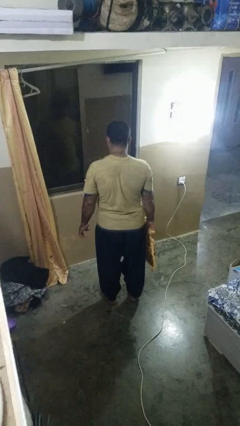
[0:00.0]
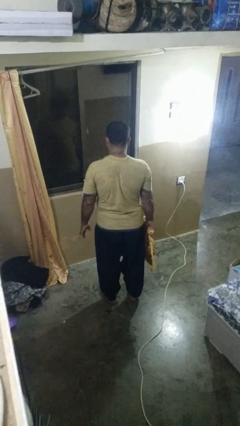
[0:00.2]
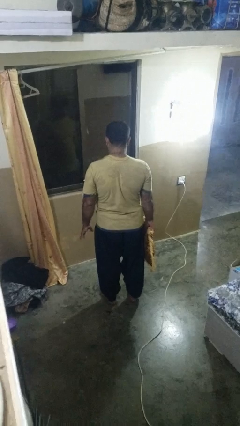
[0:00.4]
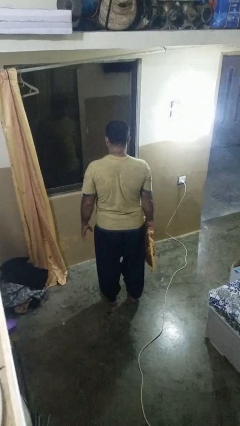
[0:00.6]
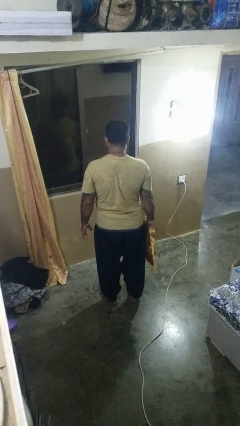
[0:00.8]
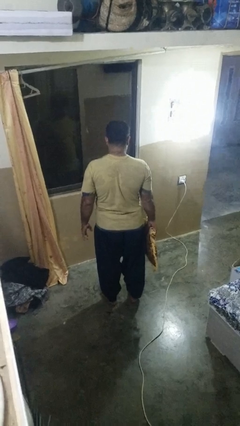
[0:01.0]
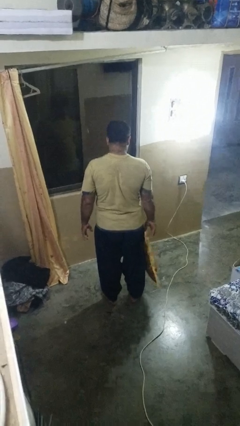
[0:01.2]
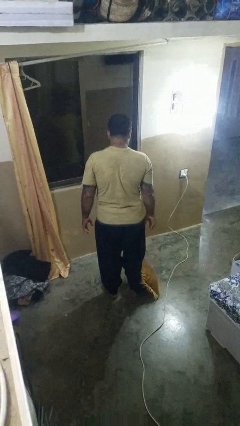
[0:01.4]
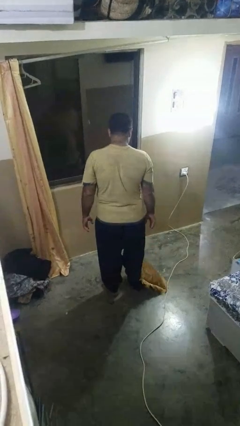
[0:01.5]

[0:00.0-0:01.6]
person drops object

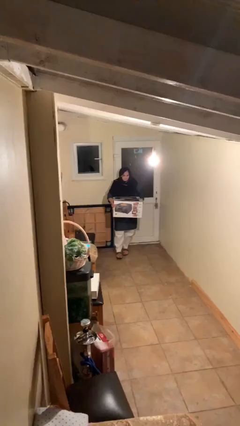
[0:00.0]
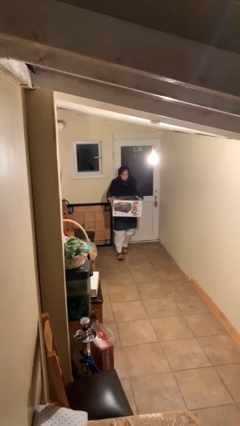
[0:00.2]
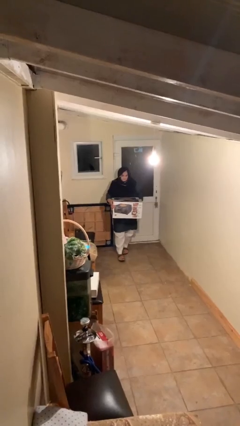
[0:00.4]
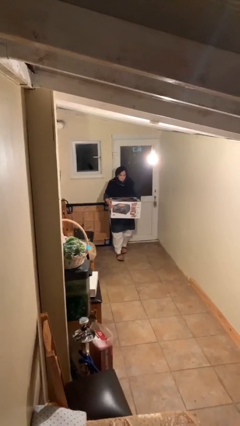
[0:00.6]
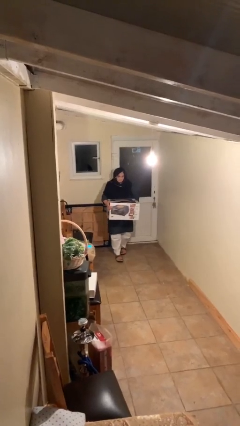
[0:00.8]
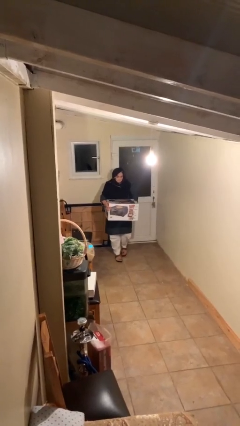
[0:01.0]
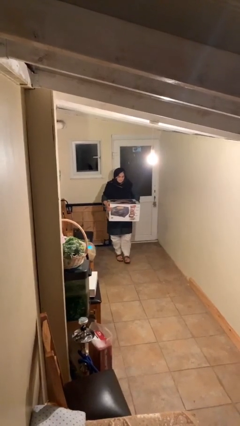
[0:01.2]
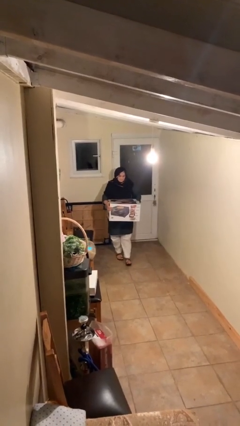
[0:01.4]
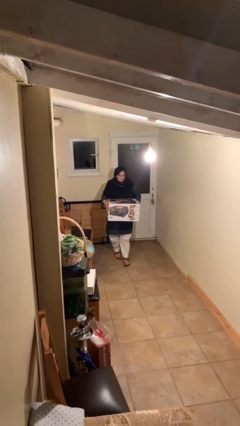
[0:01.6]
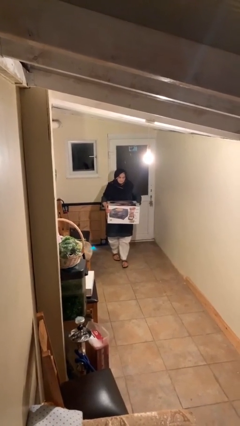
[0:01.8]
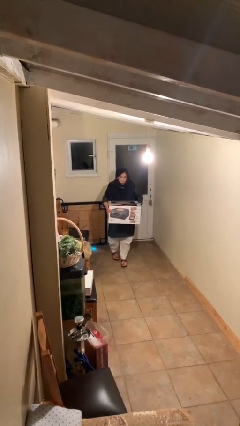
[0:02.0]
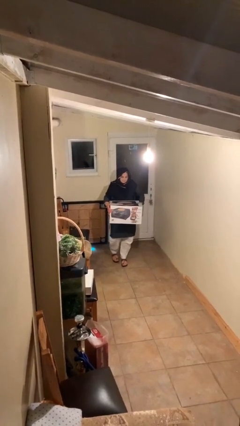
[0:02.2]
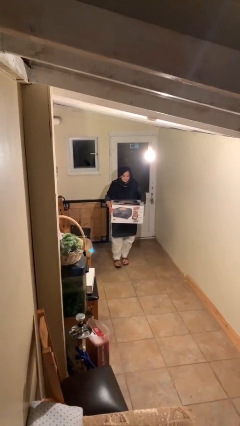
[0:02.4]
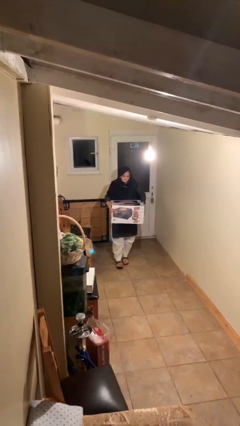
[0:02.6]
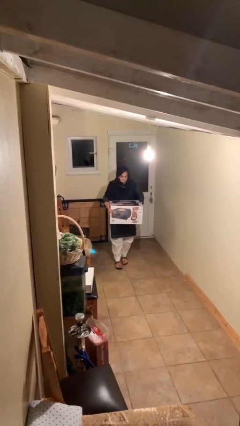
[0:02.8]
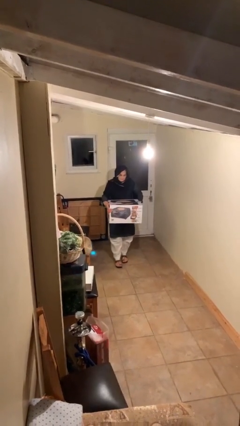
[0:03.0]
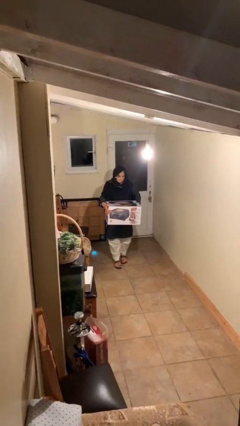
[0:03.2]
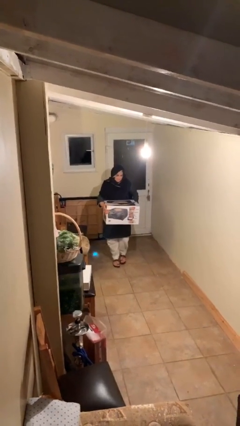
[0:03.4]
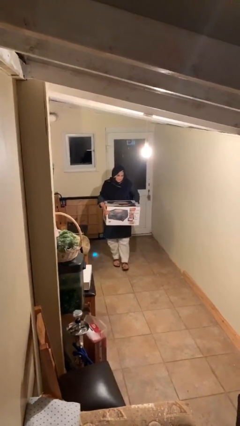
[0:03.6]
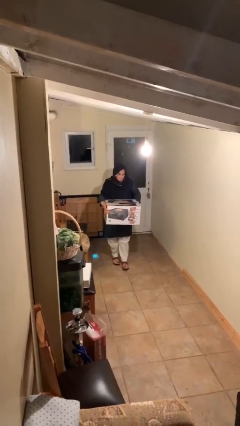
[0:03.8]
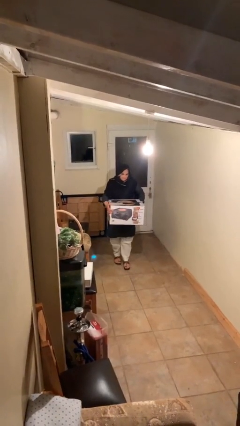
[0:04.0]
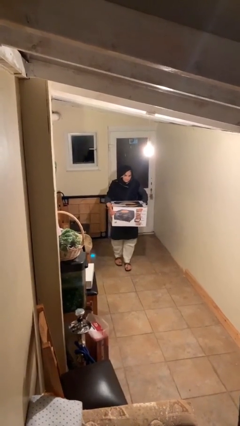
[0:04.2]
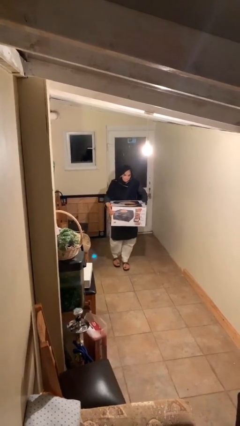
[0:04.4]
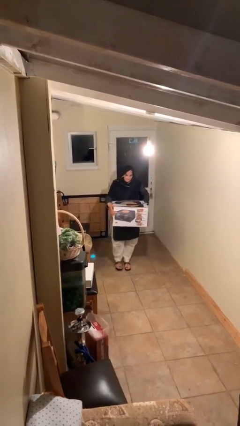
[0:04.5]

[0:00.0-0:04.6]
person carries heavy object

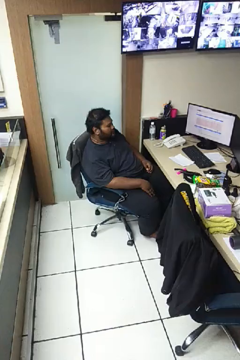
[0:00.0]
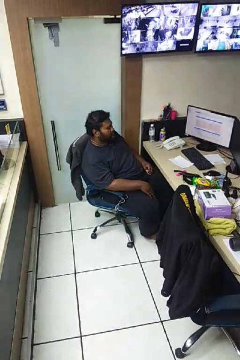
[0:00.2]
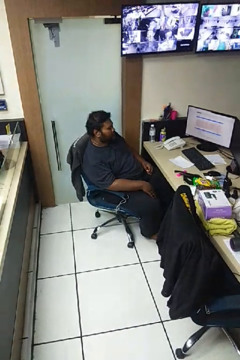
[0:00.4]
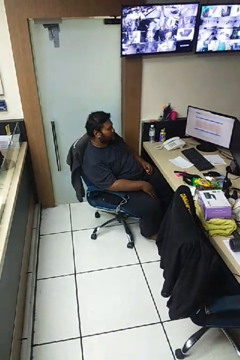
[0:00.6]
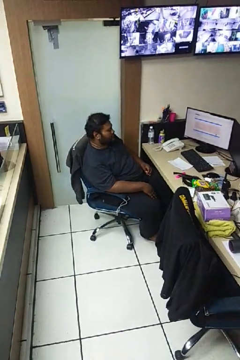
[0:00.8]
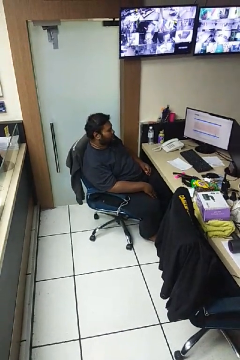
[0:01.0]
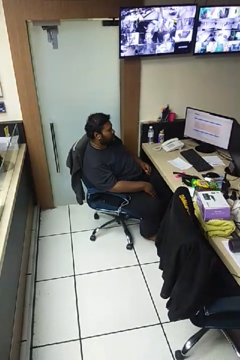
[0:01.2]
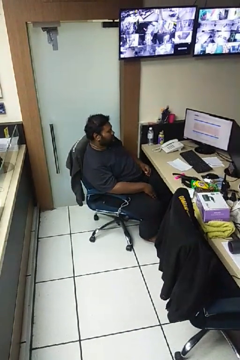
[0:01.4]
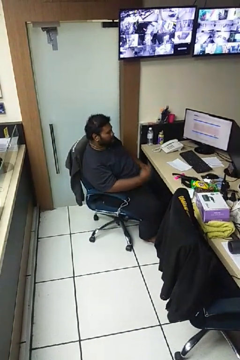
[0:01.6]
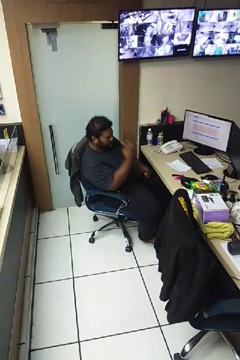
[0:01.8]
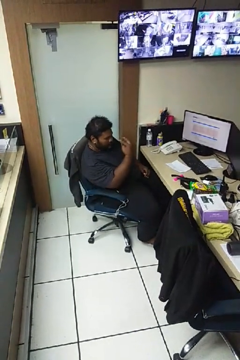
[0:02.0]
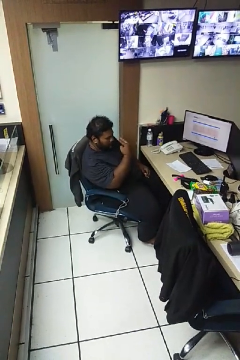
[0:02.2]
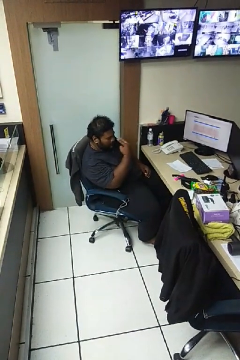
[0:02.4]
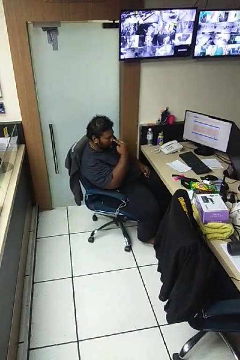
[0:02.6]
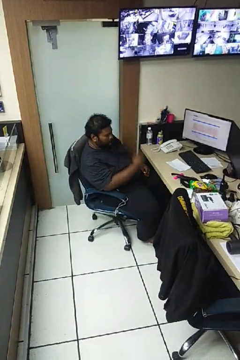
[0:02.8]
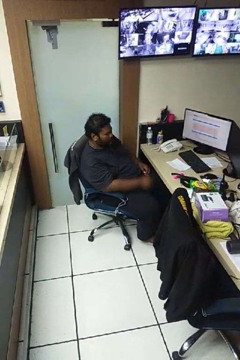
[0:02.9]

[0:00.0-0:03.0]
person gestures watch closely

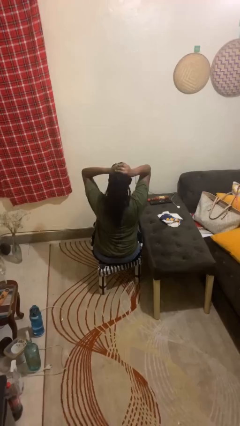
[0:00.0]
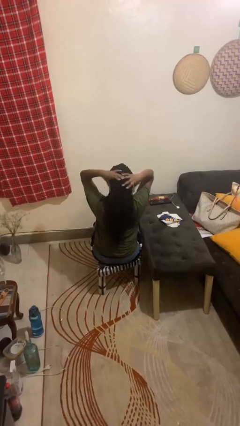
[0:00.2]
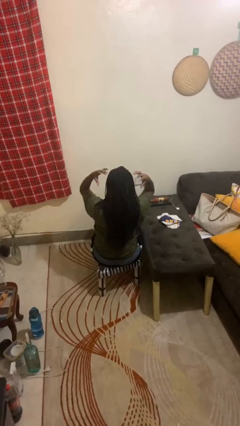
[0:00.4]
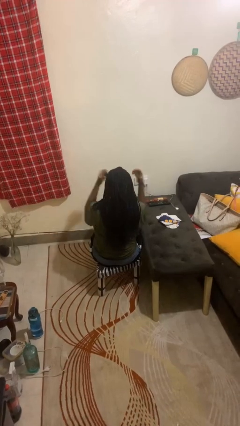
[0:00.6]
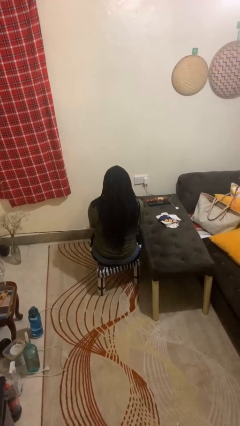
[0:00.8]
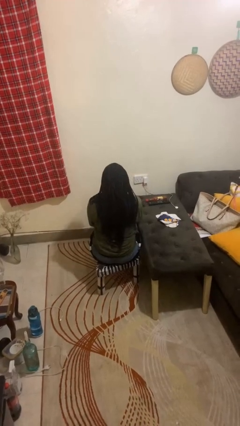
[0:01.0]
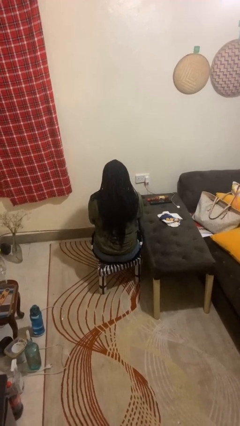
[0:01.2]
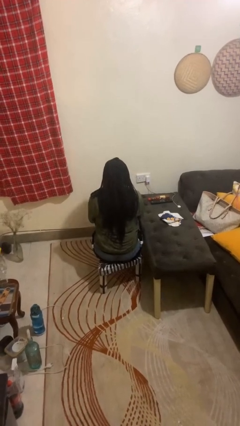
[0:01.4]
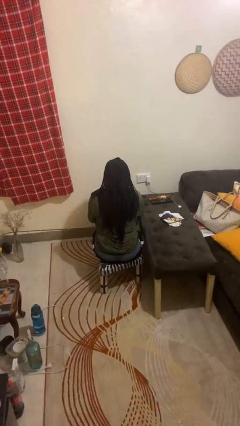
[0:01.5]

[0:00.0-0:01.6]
person takes off hairtie

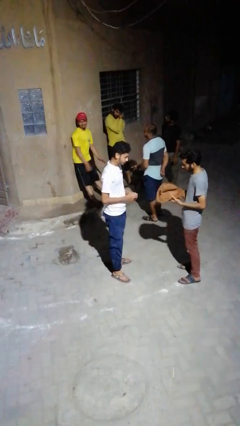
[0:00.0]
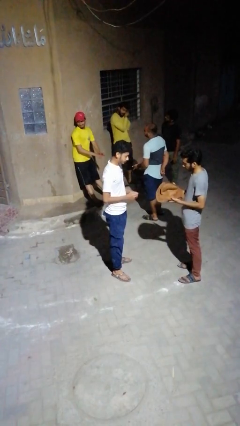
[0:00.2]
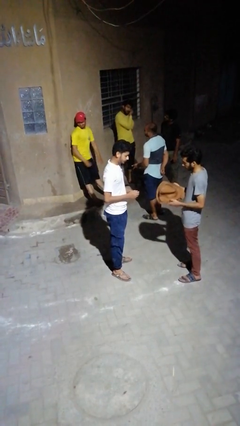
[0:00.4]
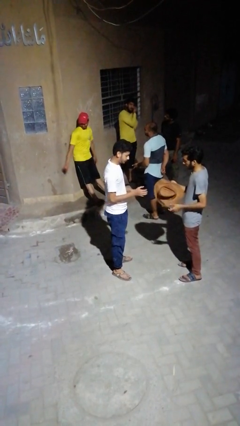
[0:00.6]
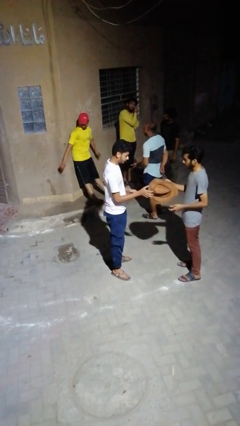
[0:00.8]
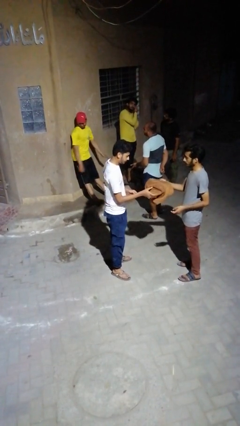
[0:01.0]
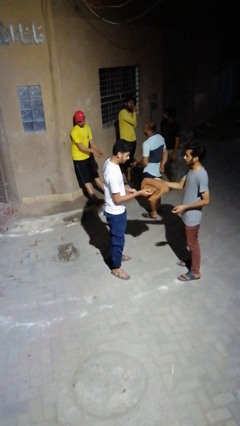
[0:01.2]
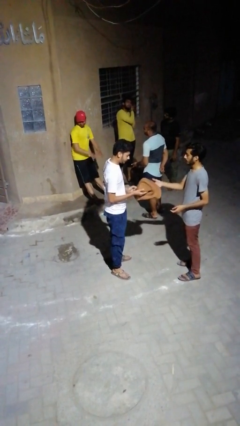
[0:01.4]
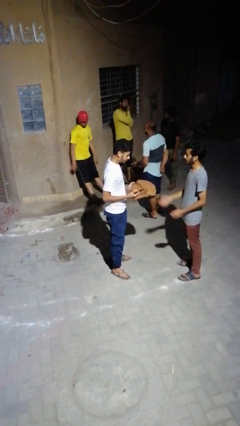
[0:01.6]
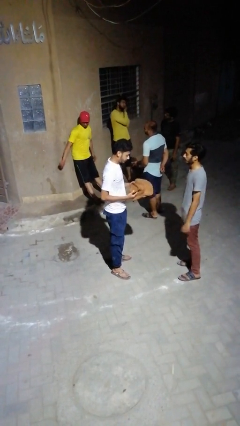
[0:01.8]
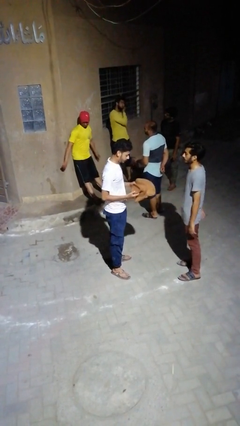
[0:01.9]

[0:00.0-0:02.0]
person transfers object to person

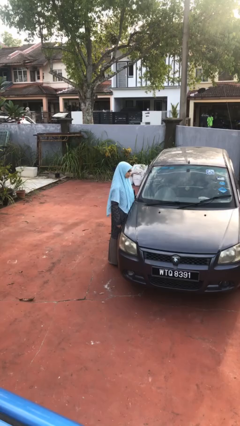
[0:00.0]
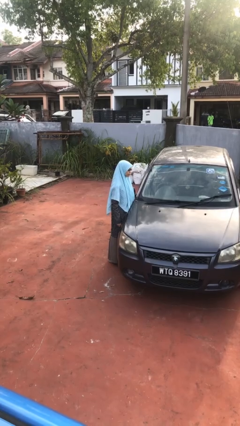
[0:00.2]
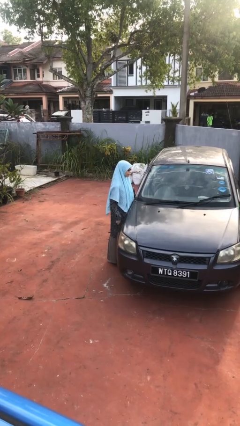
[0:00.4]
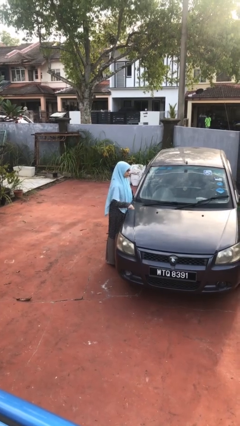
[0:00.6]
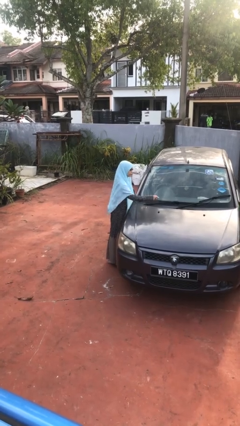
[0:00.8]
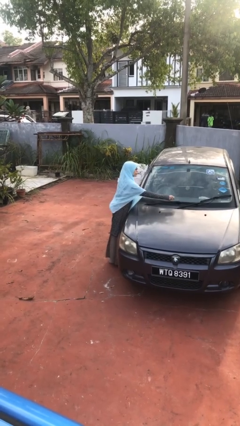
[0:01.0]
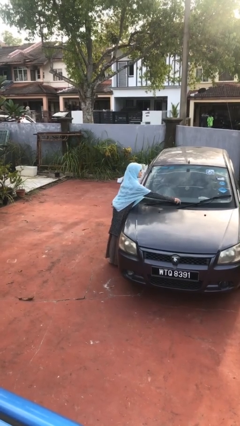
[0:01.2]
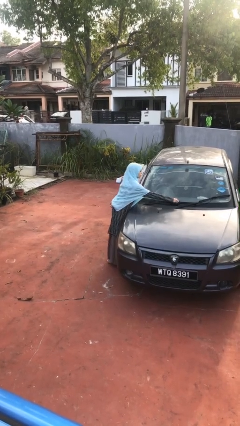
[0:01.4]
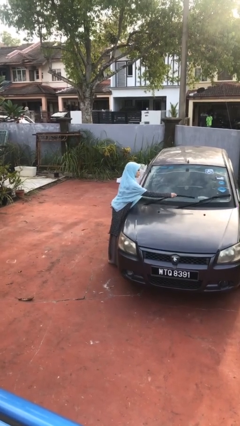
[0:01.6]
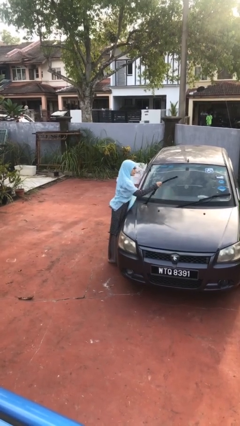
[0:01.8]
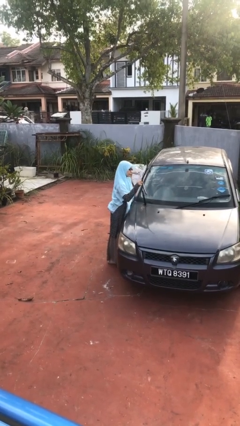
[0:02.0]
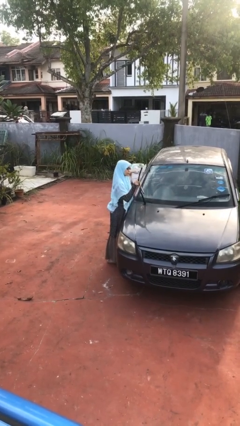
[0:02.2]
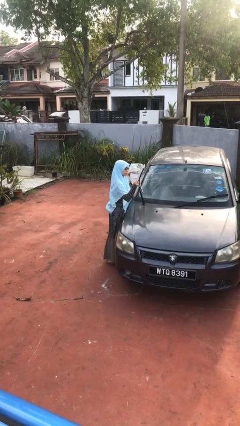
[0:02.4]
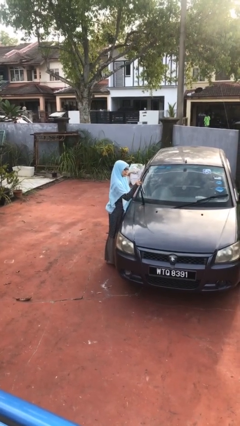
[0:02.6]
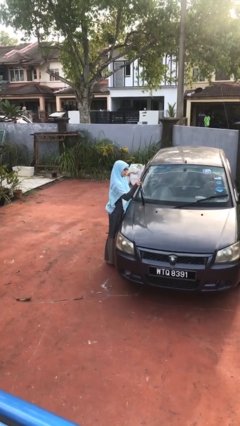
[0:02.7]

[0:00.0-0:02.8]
person flips up car wipers

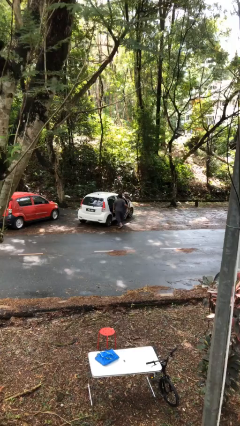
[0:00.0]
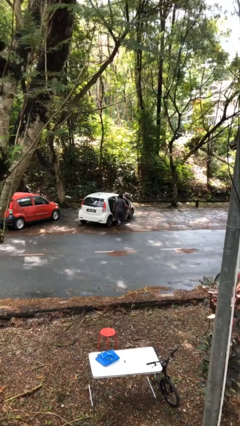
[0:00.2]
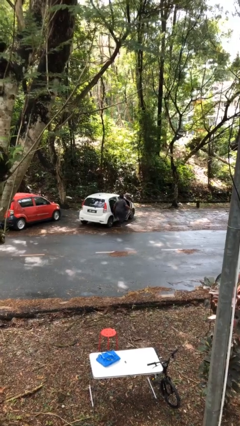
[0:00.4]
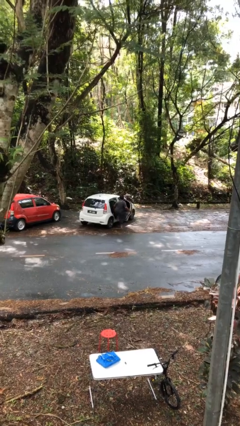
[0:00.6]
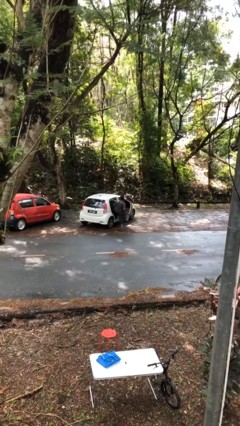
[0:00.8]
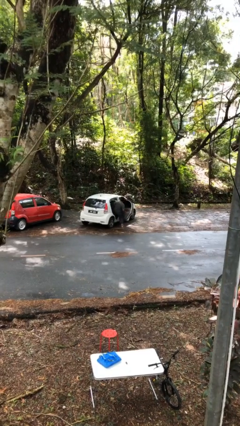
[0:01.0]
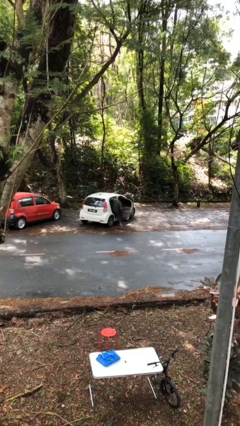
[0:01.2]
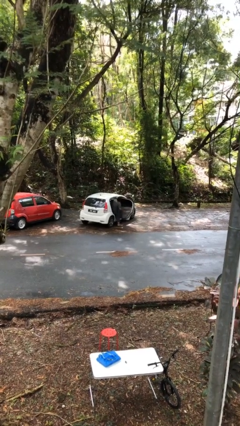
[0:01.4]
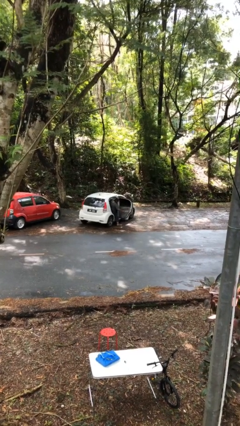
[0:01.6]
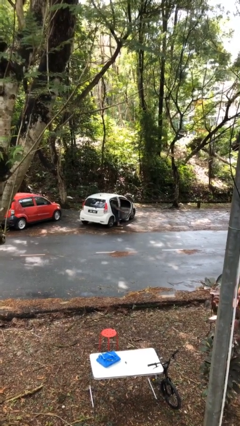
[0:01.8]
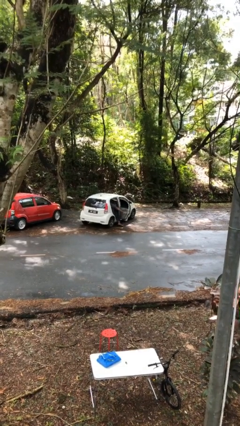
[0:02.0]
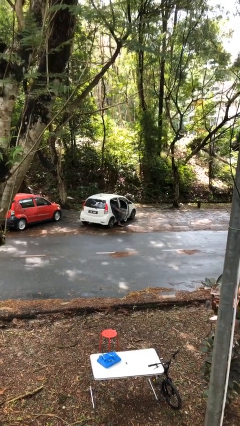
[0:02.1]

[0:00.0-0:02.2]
person enters car
